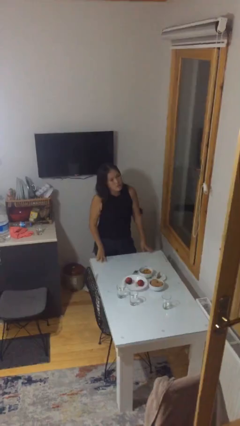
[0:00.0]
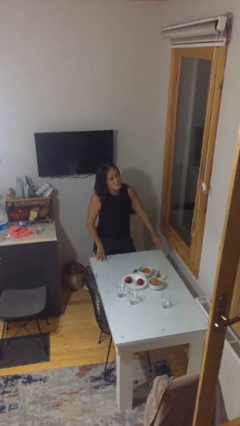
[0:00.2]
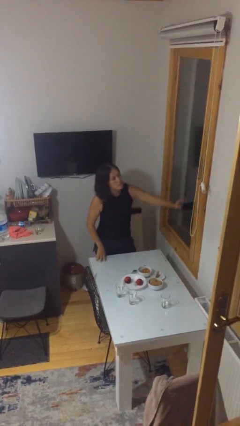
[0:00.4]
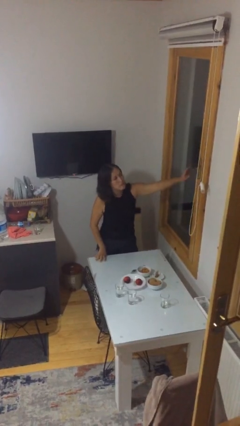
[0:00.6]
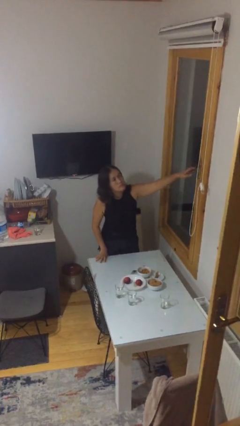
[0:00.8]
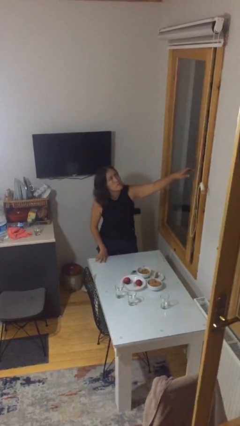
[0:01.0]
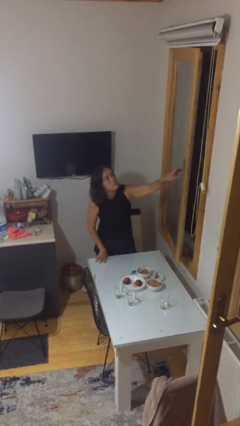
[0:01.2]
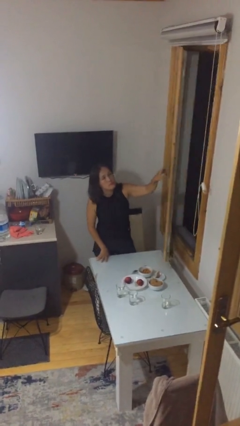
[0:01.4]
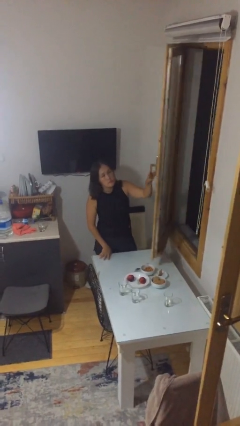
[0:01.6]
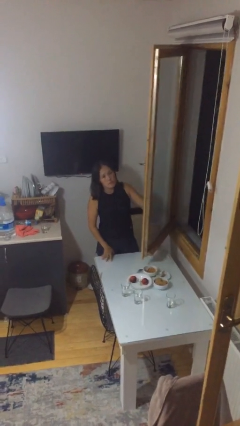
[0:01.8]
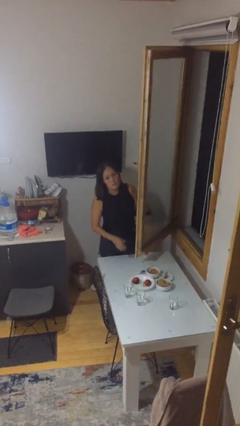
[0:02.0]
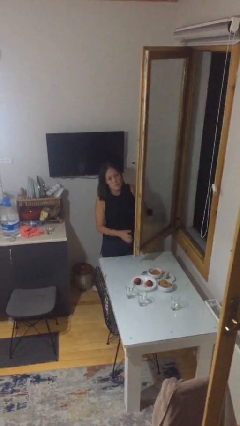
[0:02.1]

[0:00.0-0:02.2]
person opens home window

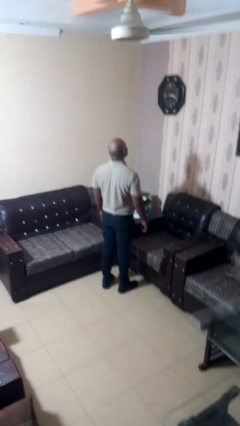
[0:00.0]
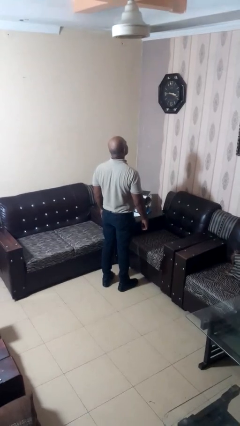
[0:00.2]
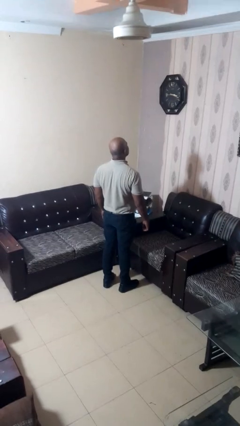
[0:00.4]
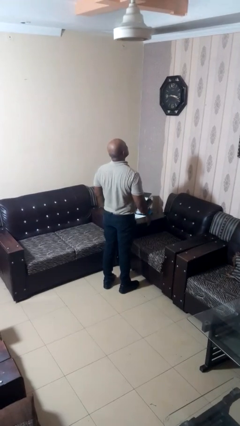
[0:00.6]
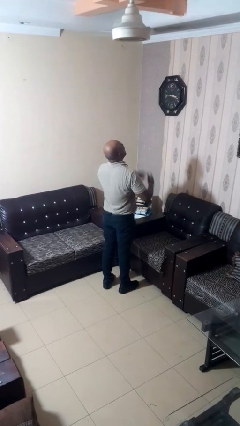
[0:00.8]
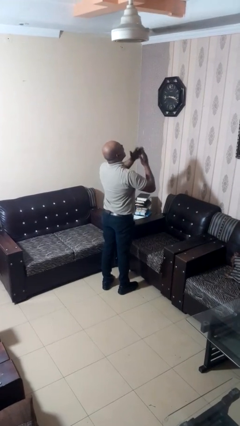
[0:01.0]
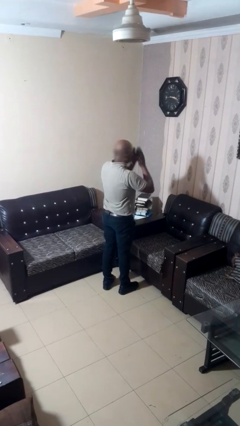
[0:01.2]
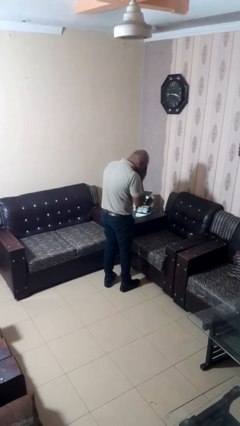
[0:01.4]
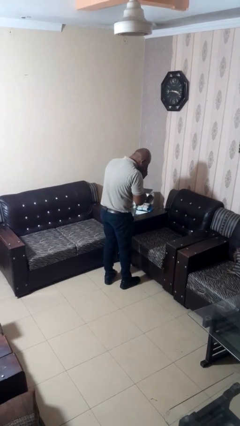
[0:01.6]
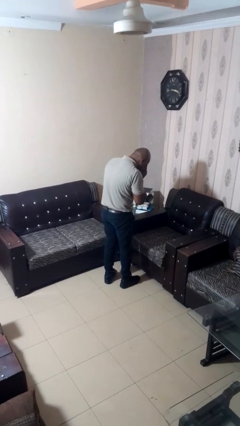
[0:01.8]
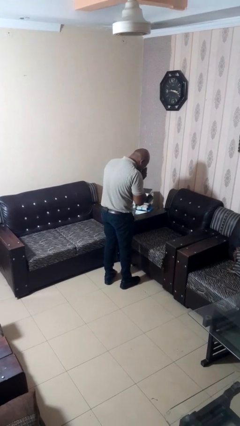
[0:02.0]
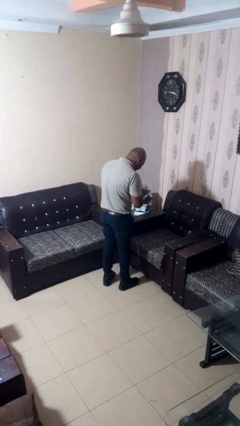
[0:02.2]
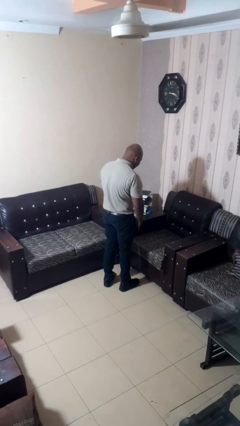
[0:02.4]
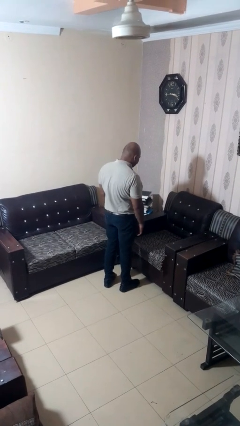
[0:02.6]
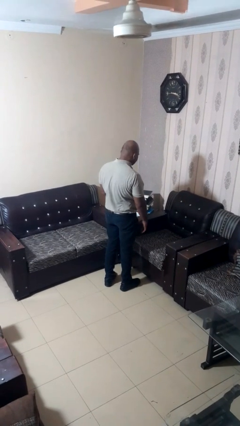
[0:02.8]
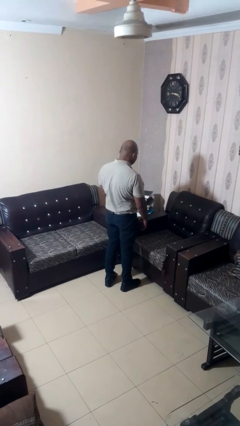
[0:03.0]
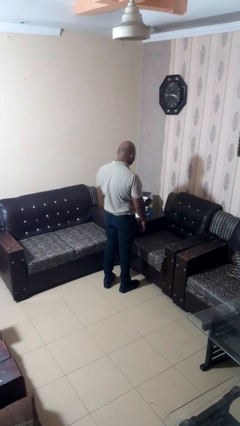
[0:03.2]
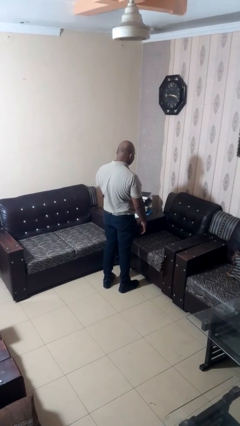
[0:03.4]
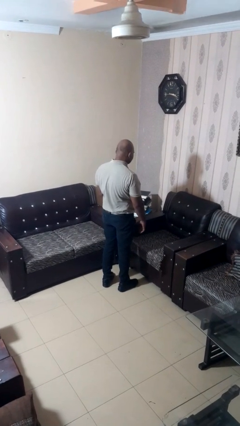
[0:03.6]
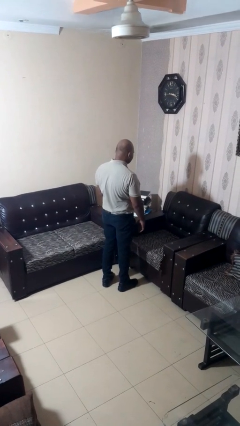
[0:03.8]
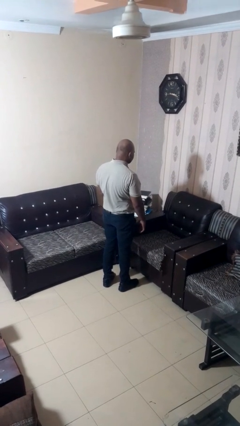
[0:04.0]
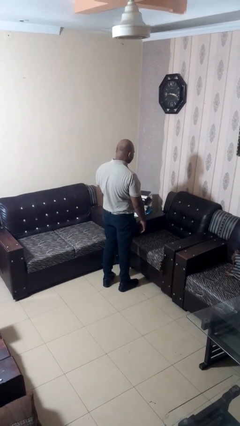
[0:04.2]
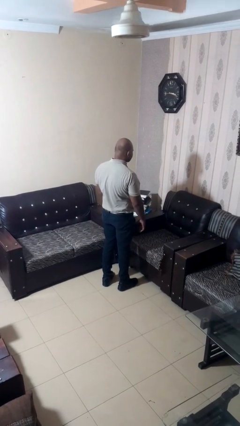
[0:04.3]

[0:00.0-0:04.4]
person sneezes into hand

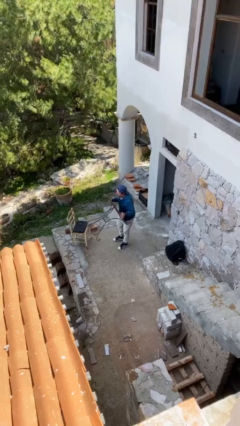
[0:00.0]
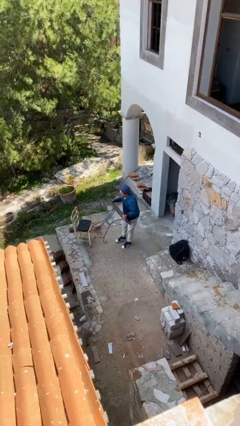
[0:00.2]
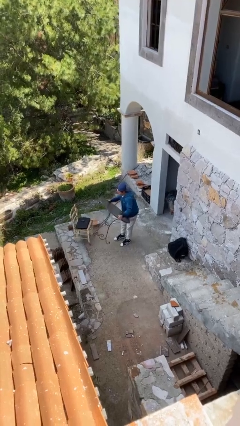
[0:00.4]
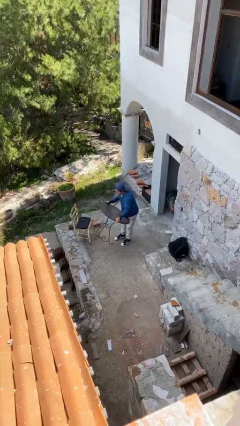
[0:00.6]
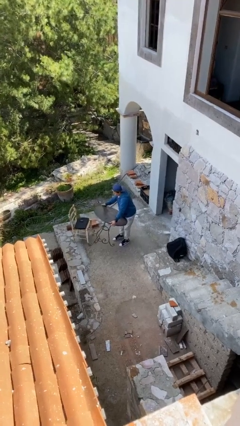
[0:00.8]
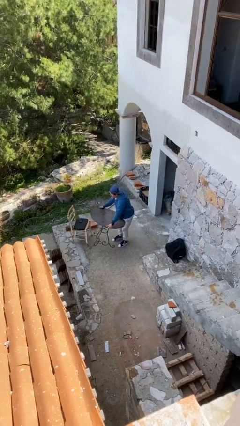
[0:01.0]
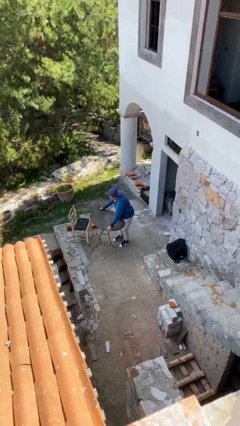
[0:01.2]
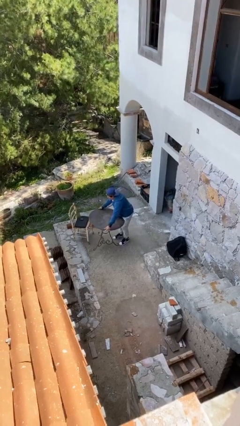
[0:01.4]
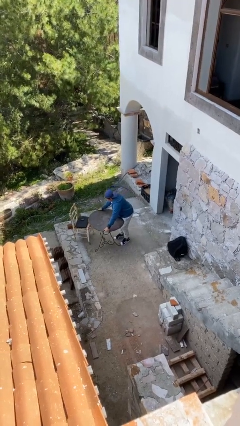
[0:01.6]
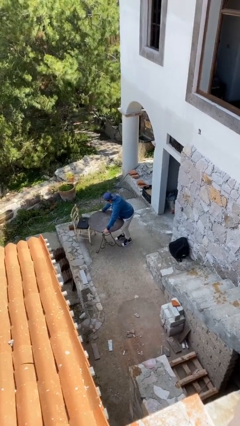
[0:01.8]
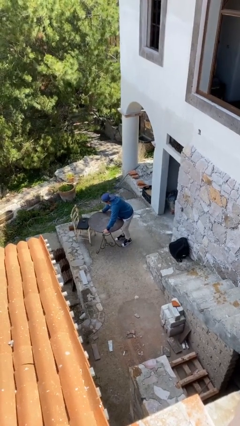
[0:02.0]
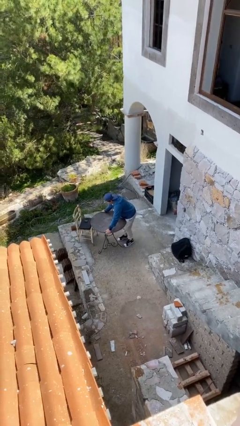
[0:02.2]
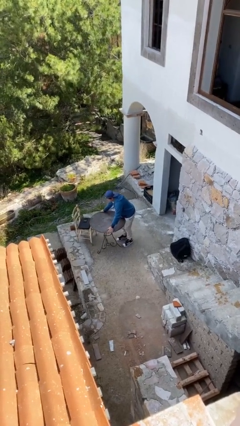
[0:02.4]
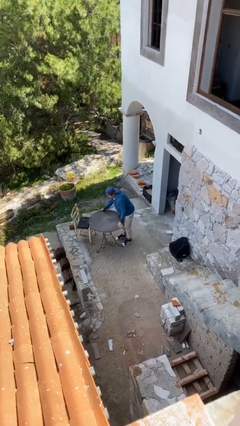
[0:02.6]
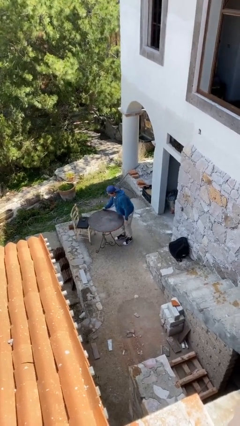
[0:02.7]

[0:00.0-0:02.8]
person puts down object on floor

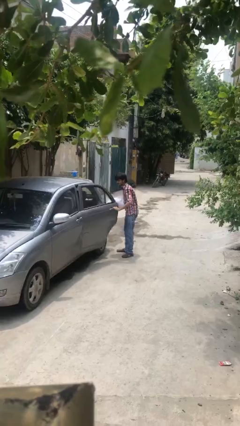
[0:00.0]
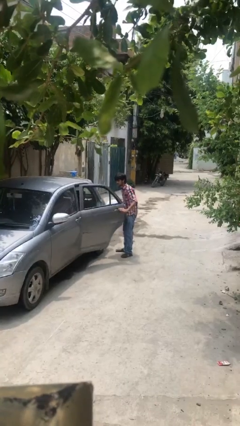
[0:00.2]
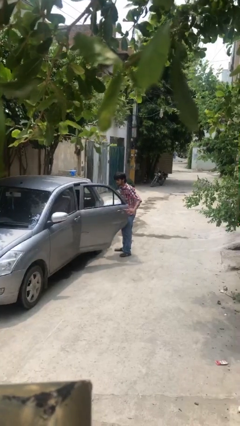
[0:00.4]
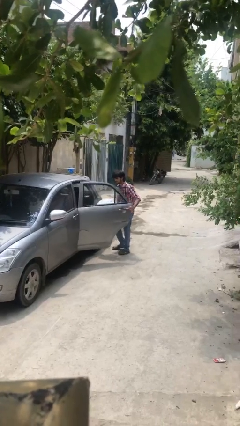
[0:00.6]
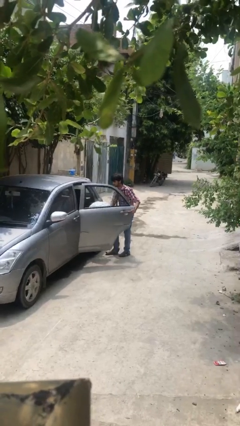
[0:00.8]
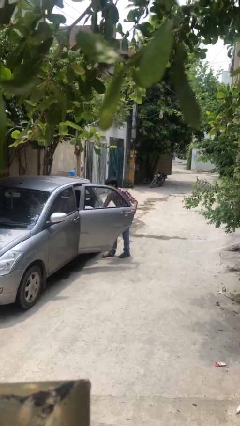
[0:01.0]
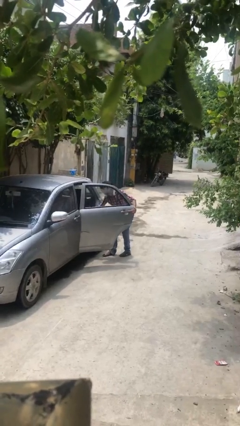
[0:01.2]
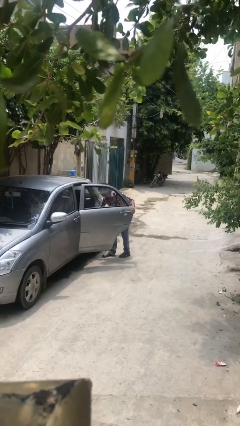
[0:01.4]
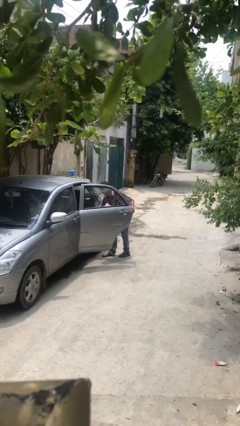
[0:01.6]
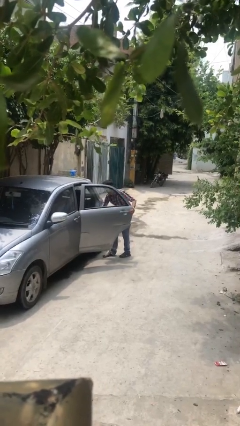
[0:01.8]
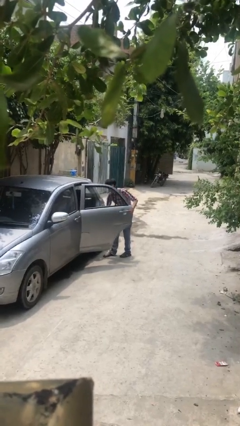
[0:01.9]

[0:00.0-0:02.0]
person loads car

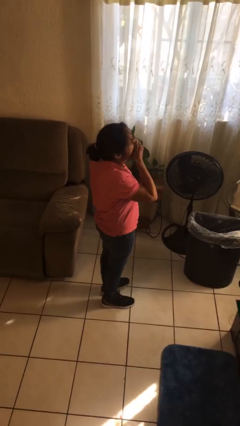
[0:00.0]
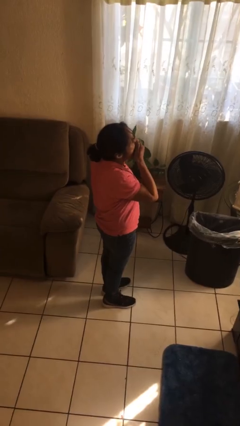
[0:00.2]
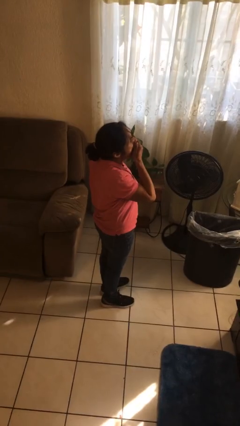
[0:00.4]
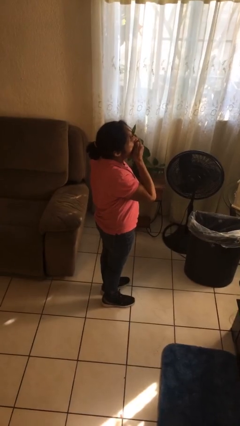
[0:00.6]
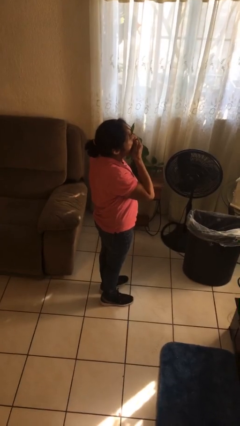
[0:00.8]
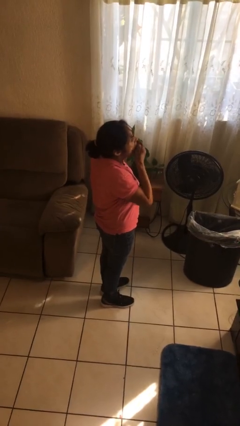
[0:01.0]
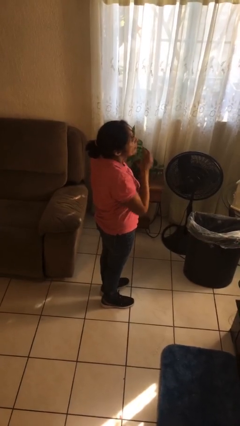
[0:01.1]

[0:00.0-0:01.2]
person yawns

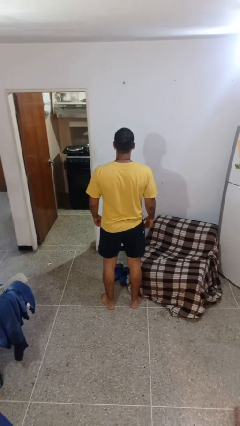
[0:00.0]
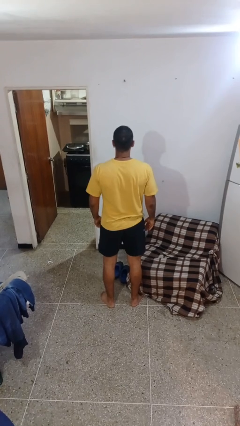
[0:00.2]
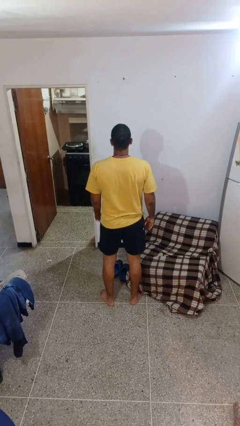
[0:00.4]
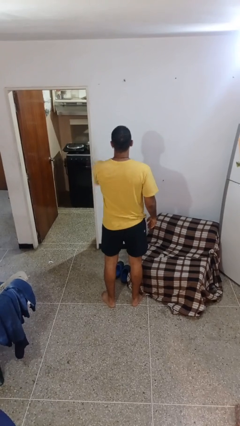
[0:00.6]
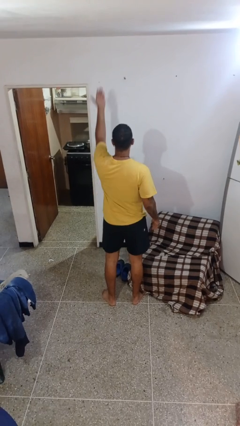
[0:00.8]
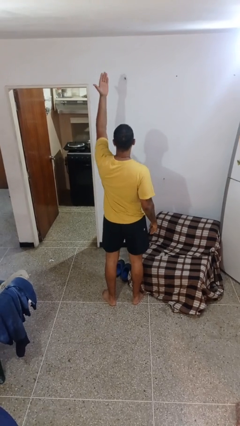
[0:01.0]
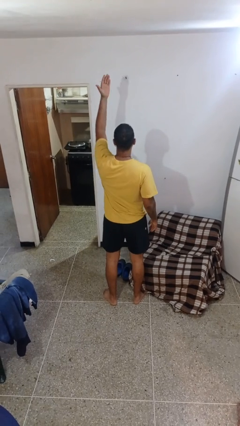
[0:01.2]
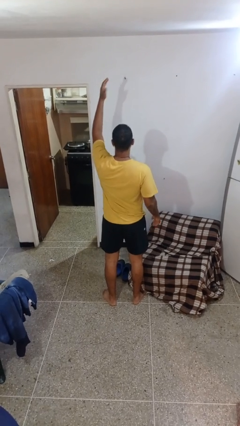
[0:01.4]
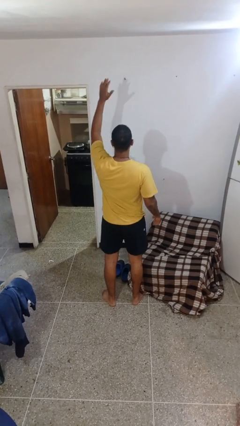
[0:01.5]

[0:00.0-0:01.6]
person gestures swipe up

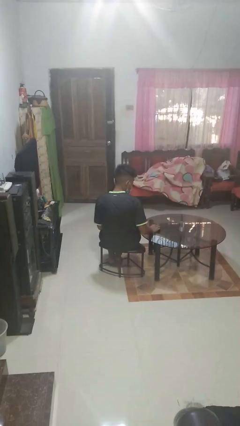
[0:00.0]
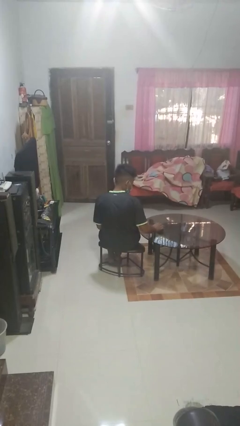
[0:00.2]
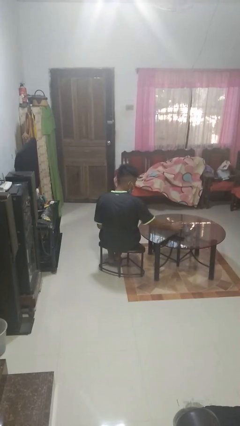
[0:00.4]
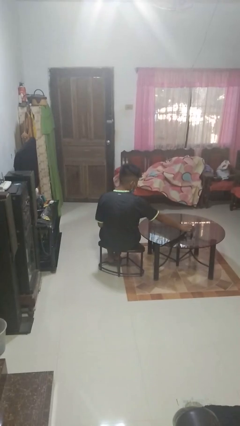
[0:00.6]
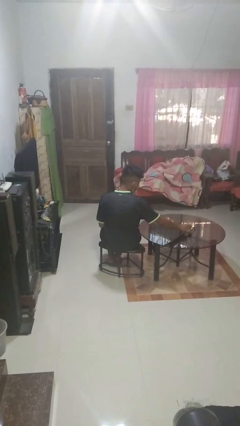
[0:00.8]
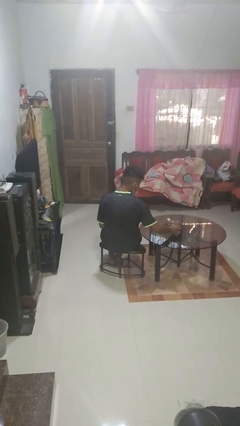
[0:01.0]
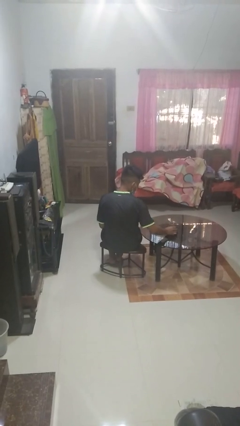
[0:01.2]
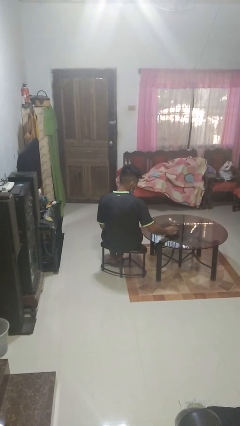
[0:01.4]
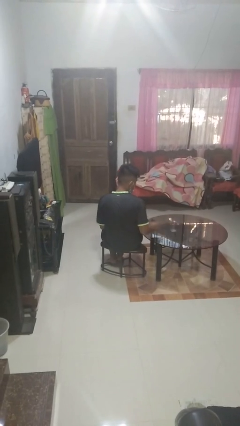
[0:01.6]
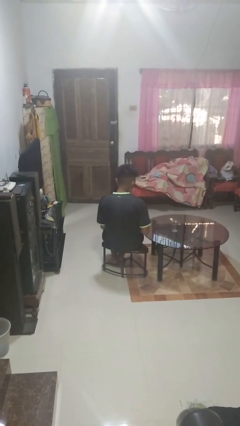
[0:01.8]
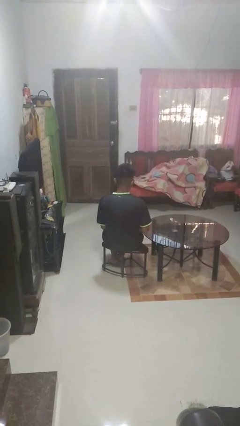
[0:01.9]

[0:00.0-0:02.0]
person sets upright glass

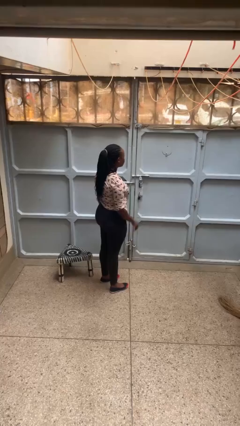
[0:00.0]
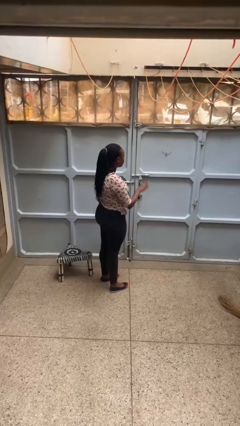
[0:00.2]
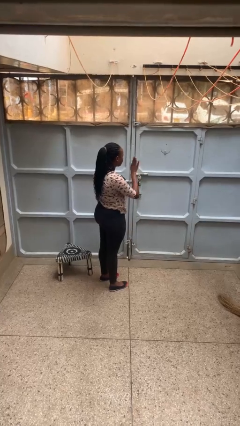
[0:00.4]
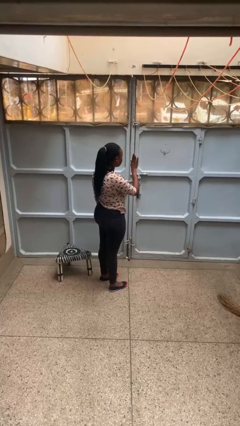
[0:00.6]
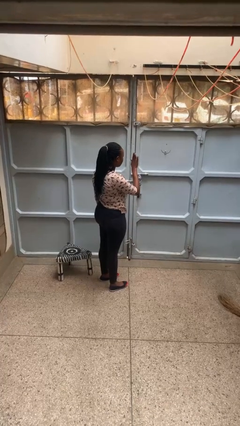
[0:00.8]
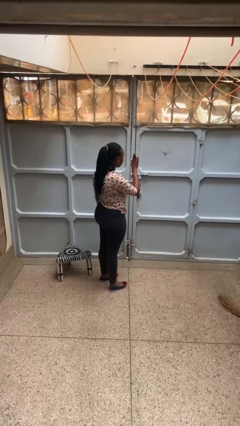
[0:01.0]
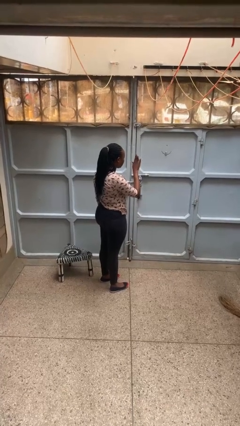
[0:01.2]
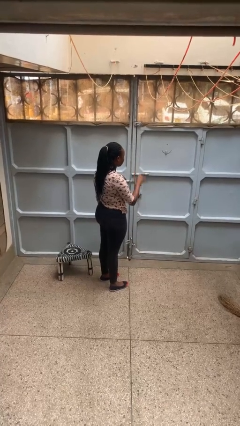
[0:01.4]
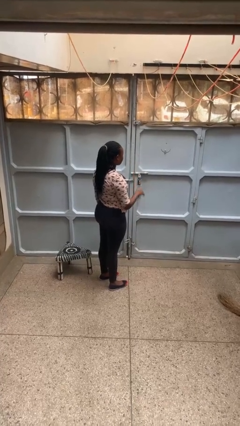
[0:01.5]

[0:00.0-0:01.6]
person gestures stop
